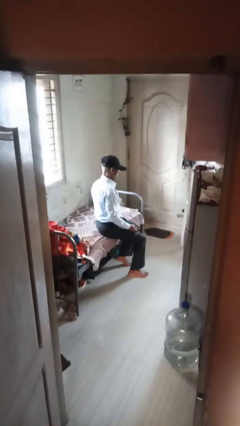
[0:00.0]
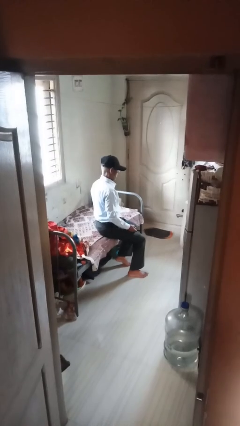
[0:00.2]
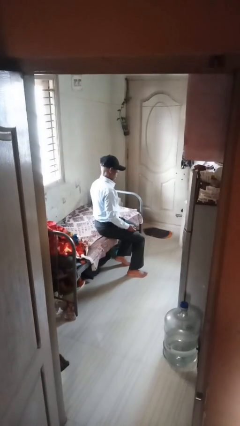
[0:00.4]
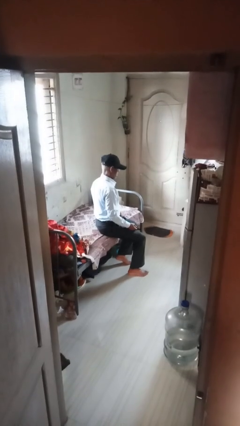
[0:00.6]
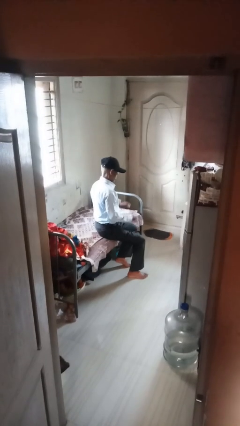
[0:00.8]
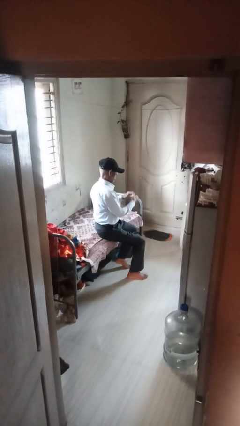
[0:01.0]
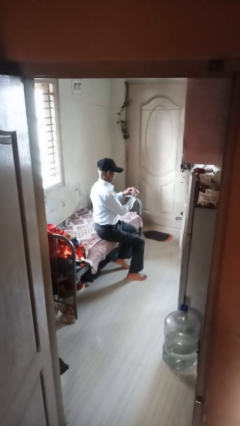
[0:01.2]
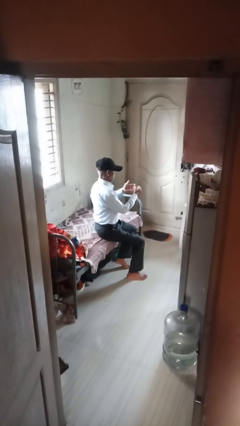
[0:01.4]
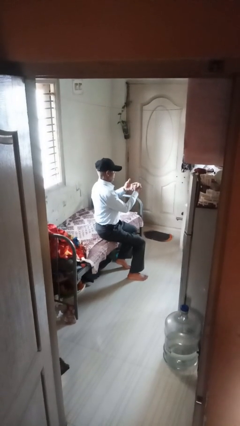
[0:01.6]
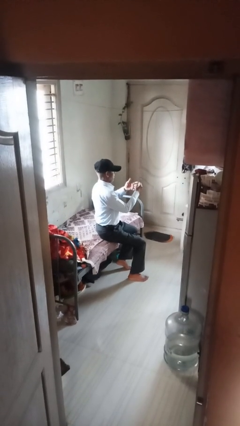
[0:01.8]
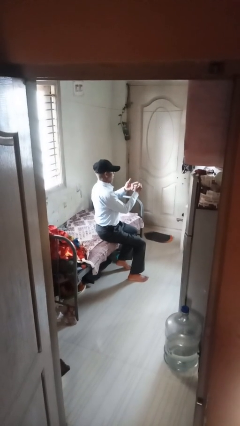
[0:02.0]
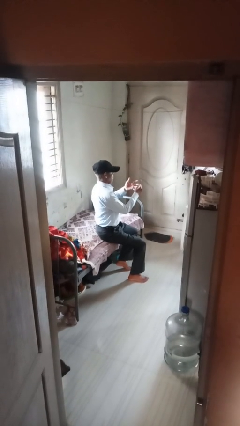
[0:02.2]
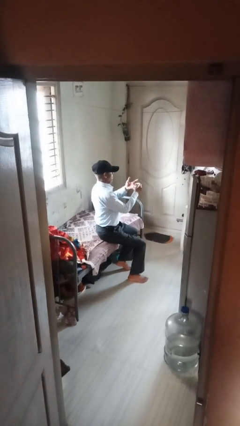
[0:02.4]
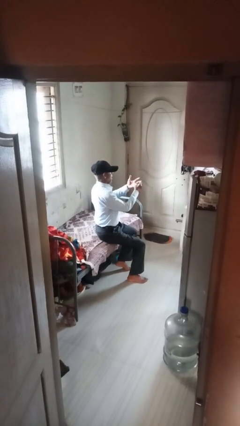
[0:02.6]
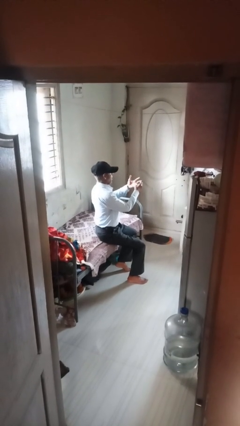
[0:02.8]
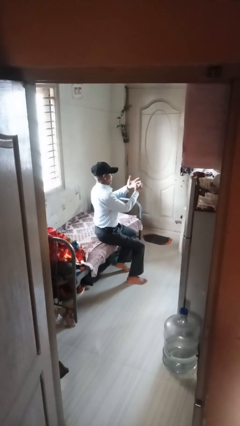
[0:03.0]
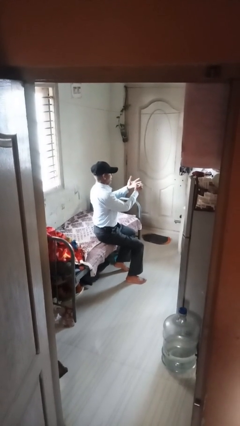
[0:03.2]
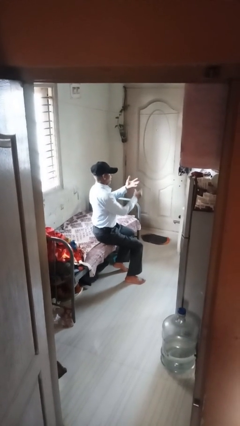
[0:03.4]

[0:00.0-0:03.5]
person puts on ring

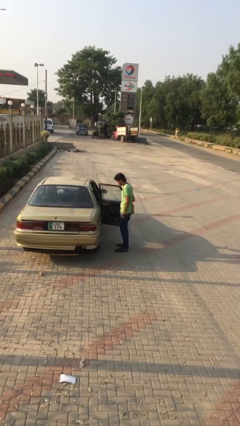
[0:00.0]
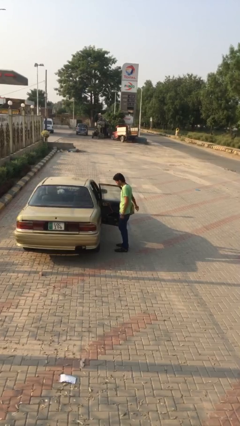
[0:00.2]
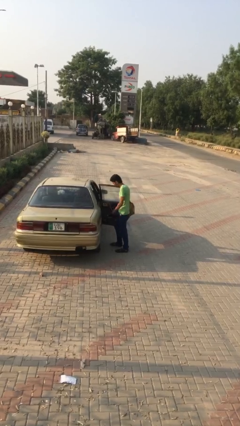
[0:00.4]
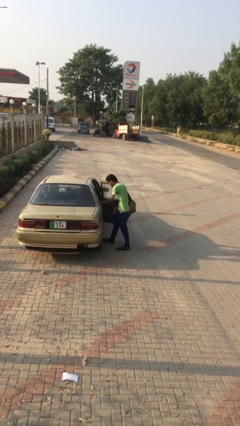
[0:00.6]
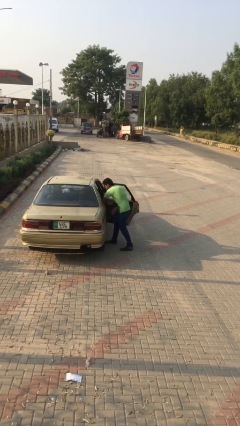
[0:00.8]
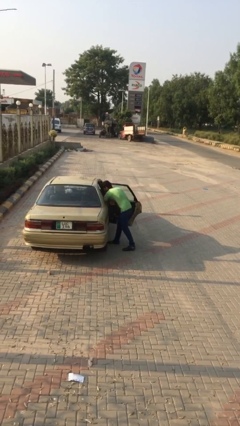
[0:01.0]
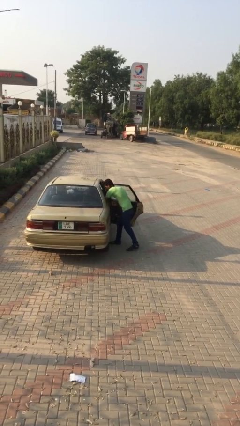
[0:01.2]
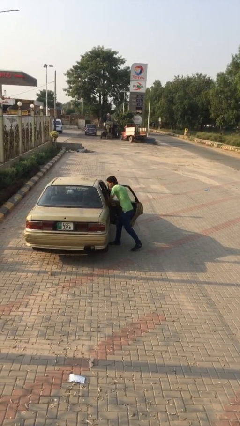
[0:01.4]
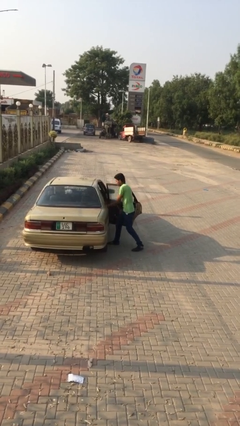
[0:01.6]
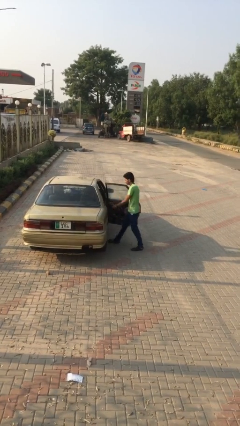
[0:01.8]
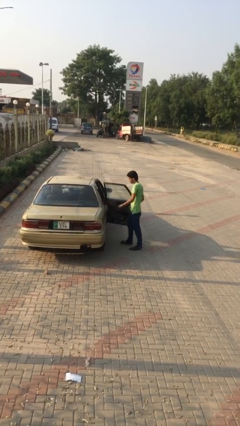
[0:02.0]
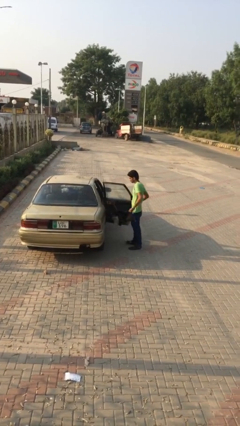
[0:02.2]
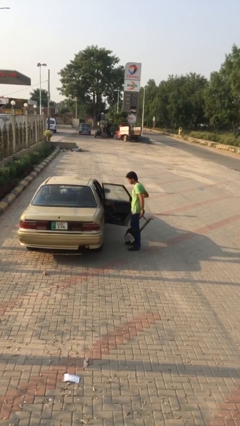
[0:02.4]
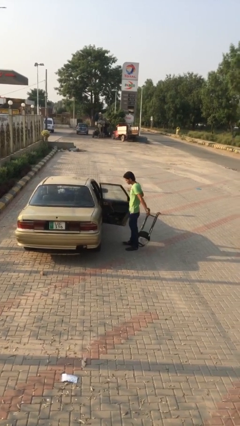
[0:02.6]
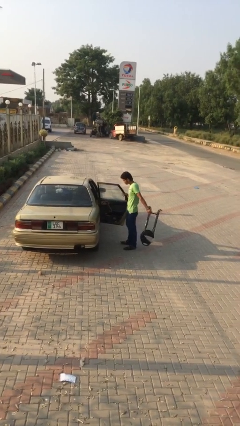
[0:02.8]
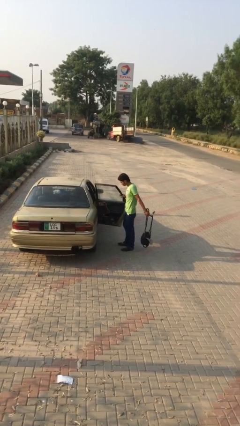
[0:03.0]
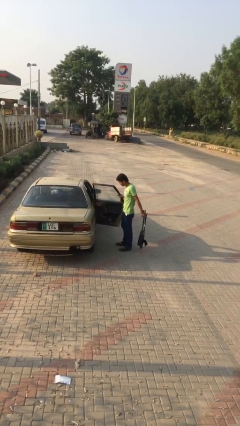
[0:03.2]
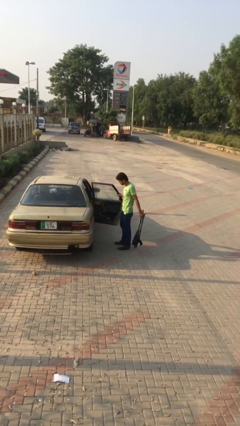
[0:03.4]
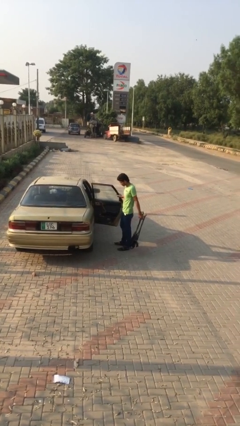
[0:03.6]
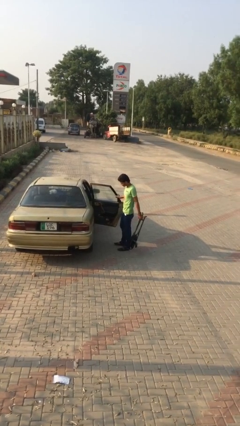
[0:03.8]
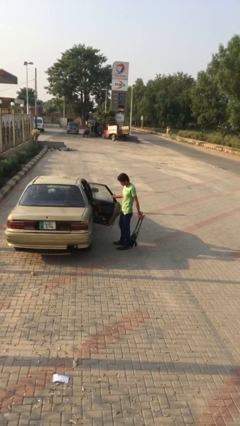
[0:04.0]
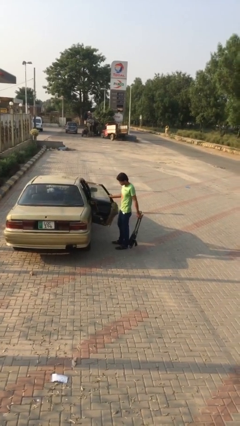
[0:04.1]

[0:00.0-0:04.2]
person unloads car

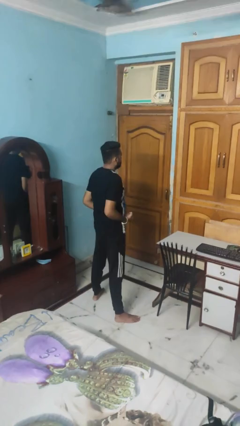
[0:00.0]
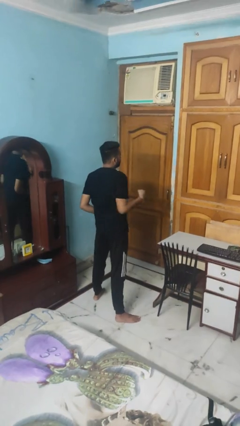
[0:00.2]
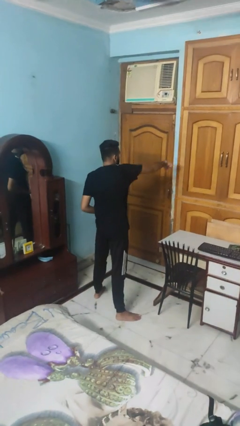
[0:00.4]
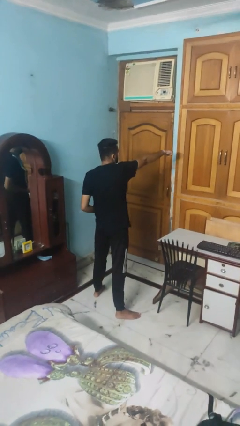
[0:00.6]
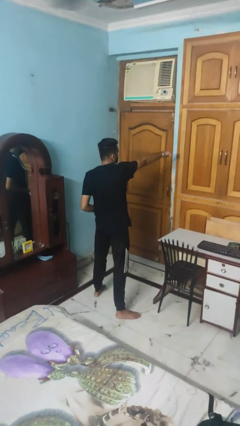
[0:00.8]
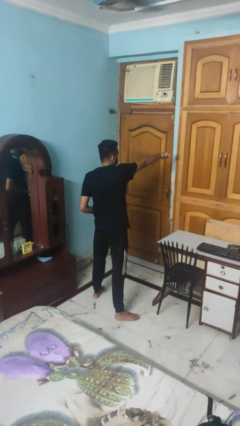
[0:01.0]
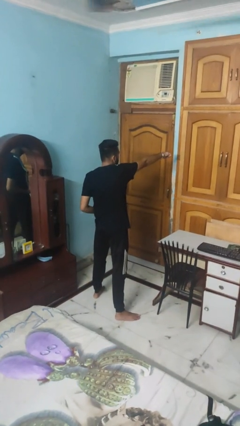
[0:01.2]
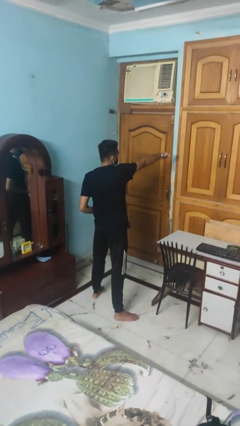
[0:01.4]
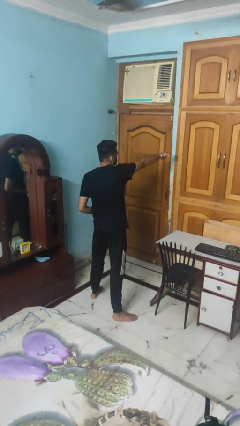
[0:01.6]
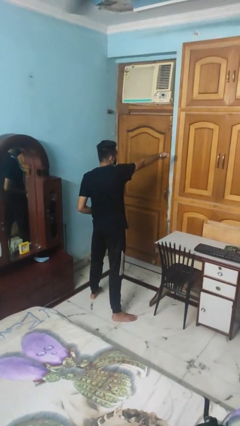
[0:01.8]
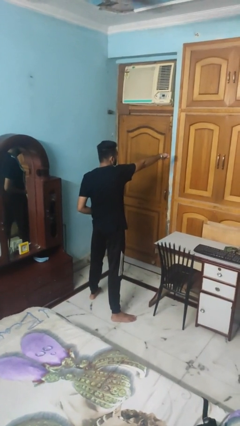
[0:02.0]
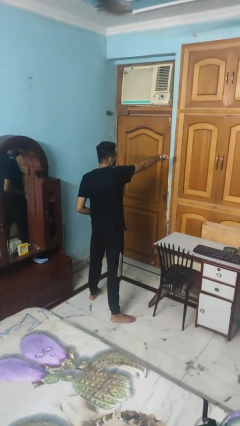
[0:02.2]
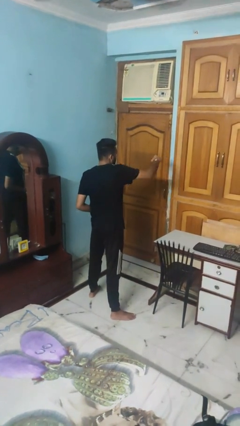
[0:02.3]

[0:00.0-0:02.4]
person punches

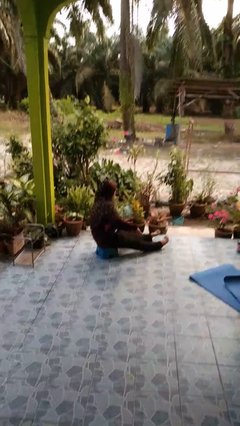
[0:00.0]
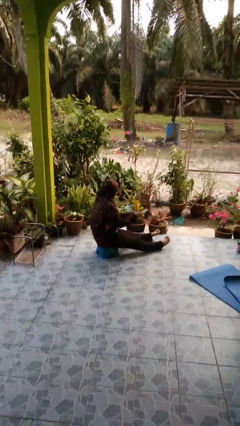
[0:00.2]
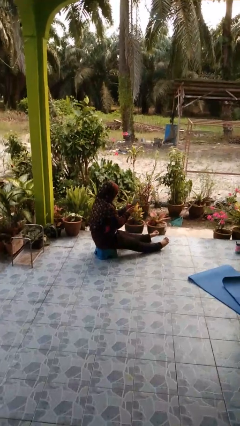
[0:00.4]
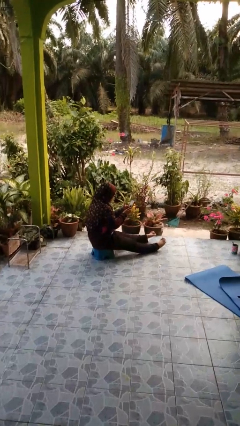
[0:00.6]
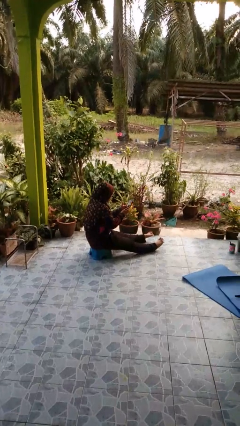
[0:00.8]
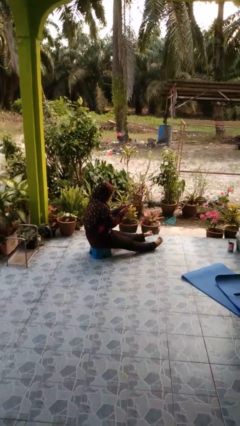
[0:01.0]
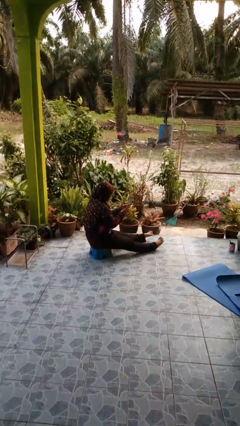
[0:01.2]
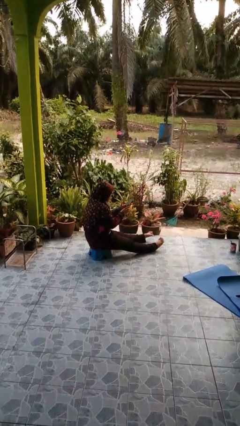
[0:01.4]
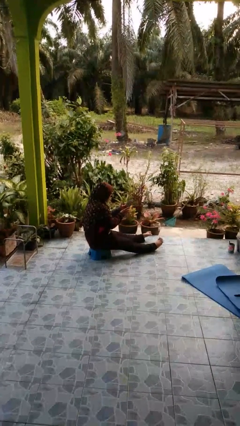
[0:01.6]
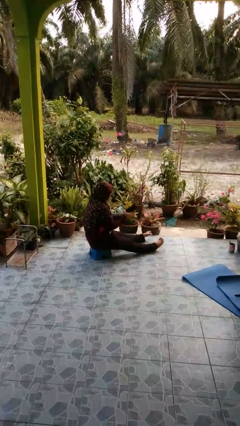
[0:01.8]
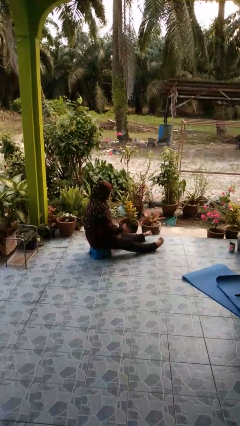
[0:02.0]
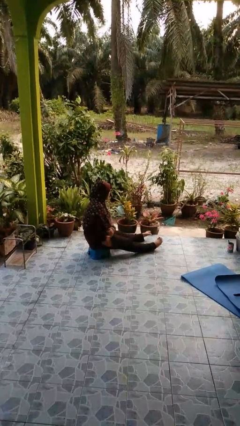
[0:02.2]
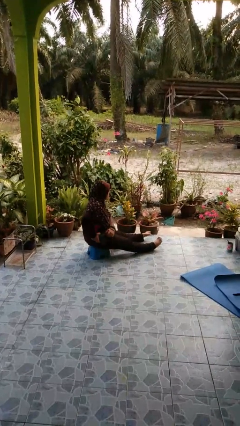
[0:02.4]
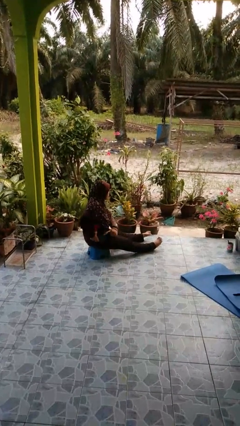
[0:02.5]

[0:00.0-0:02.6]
person takes phone from pocket

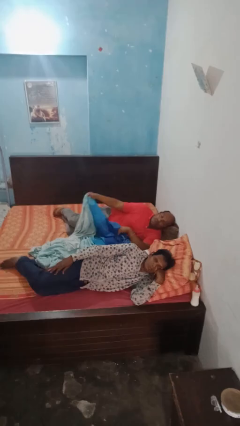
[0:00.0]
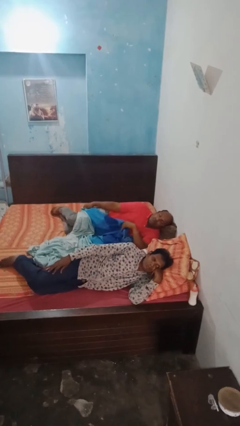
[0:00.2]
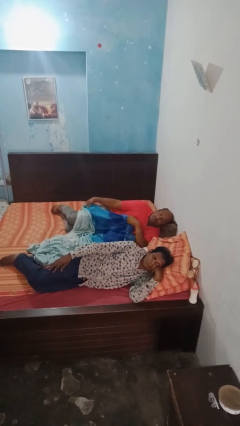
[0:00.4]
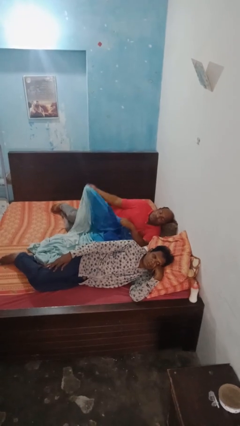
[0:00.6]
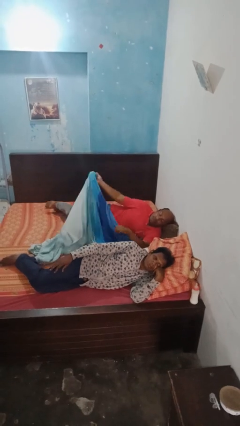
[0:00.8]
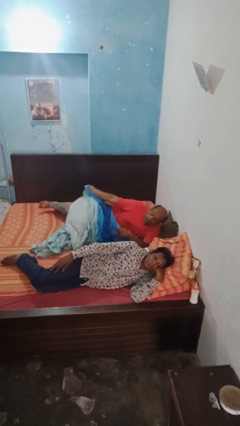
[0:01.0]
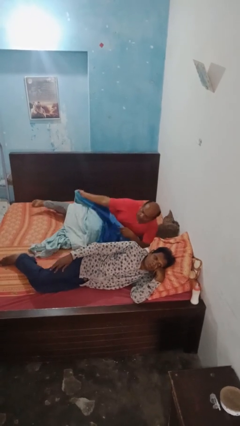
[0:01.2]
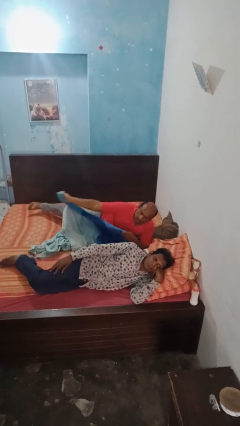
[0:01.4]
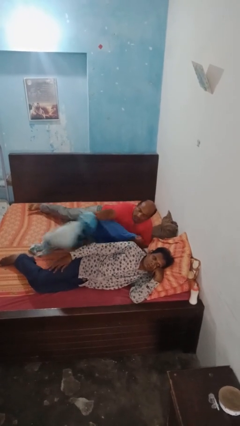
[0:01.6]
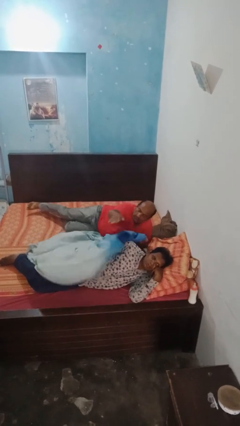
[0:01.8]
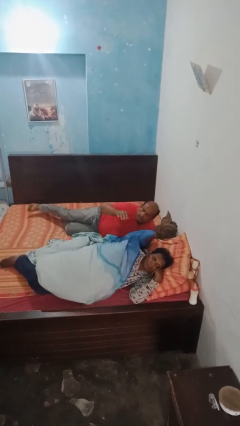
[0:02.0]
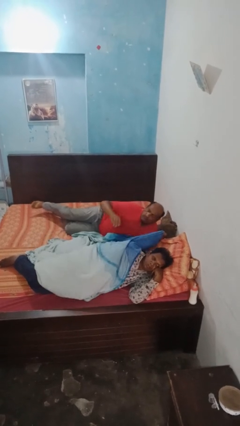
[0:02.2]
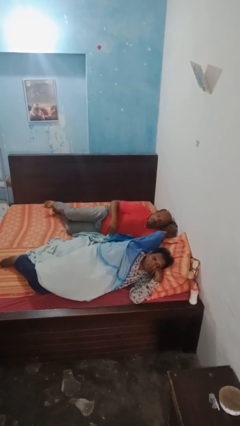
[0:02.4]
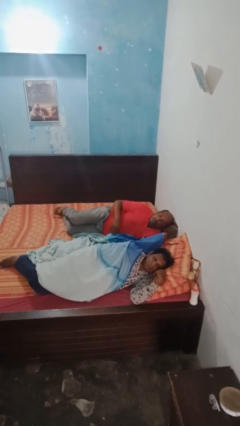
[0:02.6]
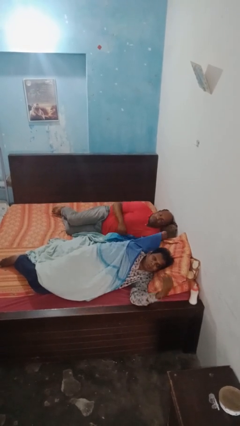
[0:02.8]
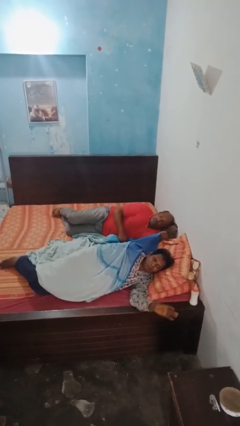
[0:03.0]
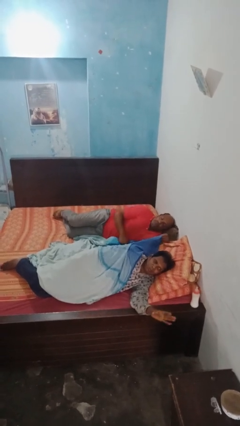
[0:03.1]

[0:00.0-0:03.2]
person covers friend with blanket

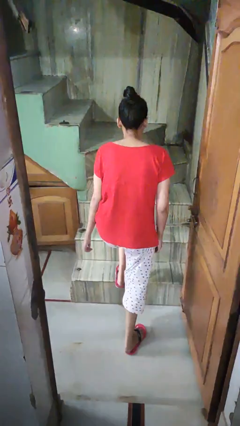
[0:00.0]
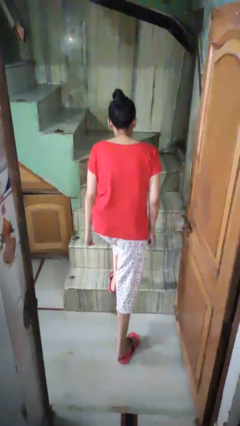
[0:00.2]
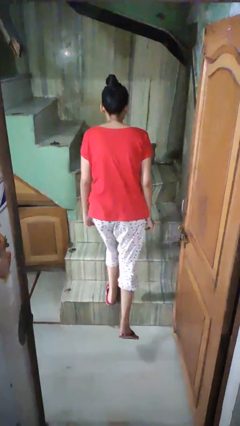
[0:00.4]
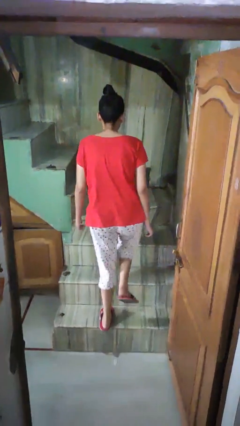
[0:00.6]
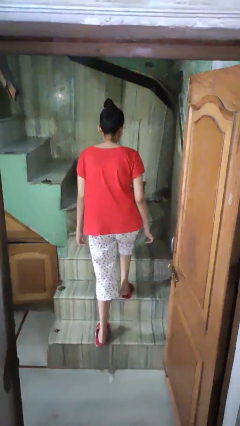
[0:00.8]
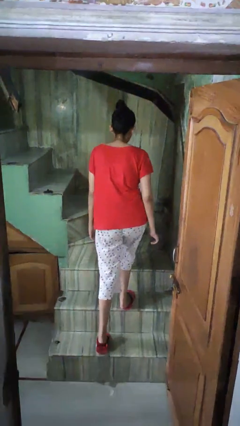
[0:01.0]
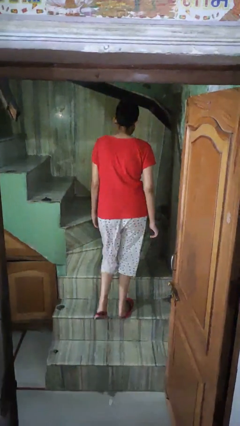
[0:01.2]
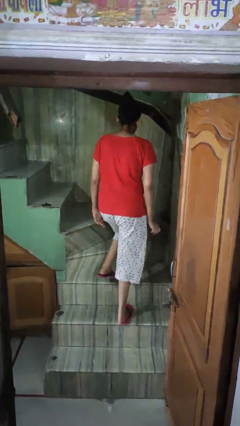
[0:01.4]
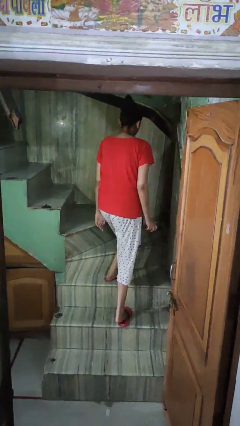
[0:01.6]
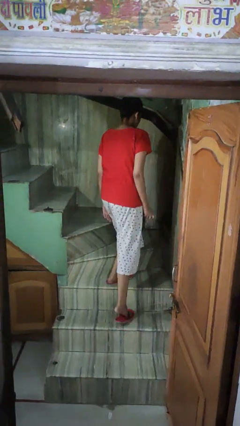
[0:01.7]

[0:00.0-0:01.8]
person climbs up stairs
